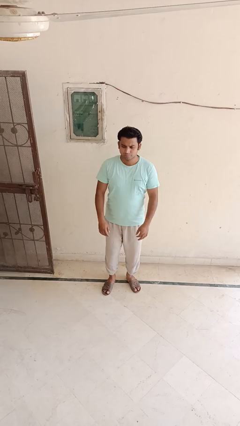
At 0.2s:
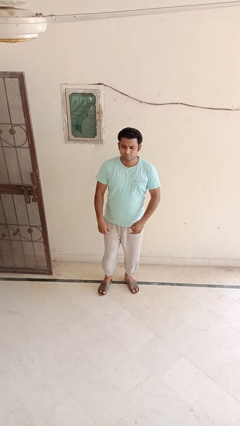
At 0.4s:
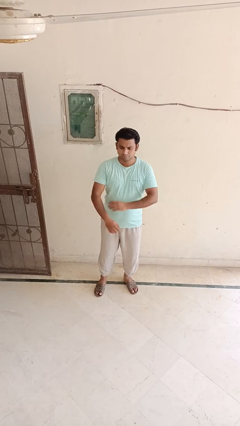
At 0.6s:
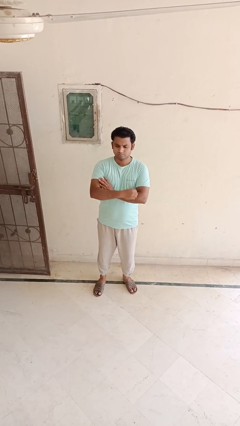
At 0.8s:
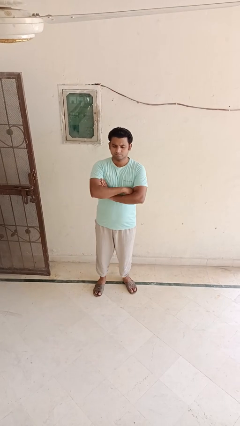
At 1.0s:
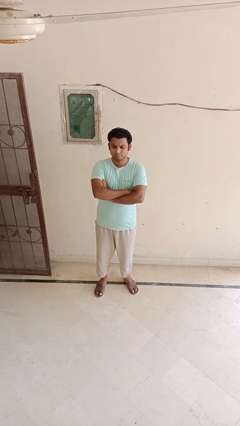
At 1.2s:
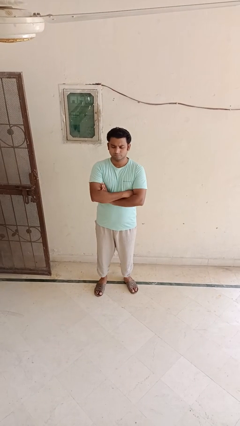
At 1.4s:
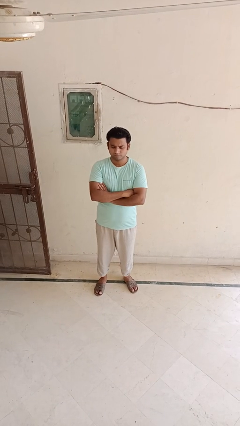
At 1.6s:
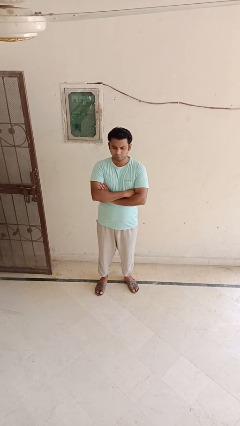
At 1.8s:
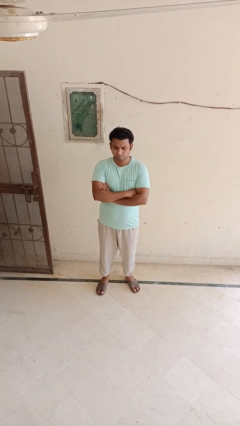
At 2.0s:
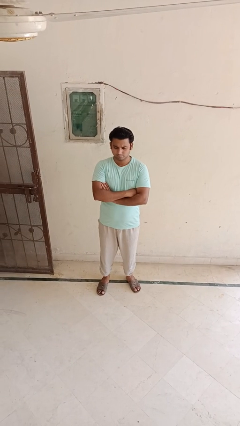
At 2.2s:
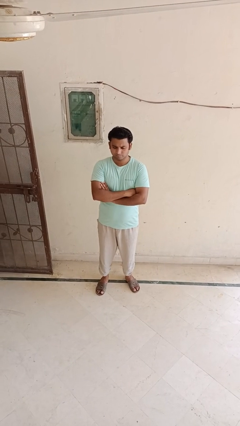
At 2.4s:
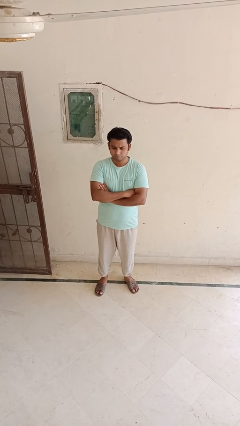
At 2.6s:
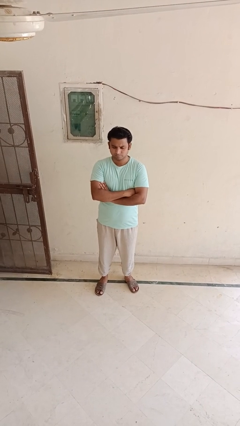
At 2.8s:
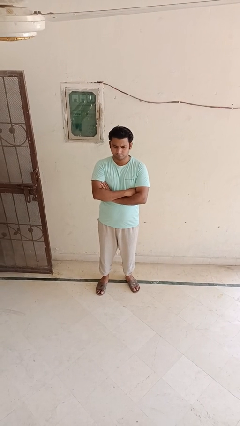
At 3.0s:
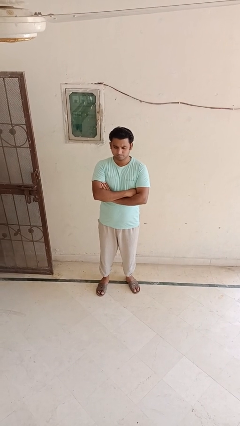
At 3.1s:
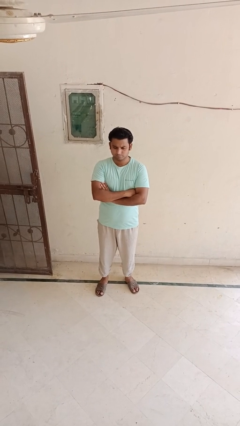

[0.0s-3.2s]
person crosses arms

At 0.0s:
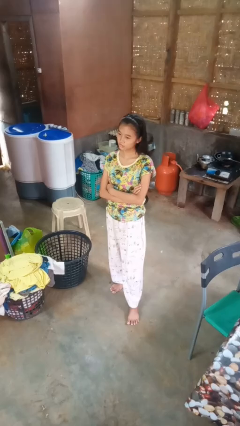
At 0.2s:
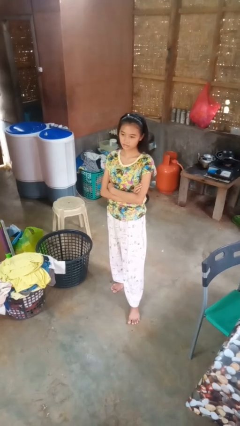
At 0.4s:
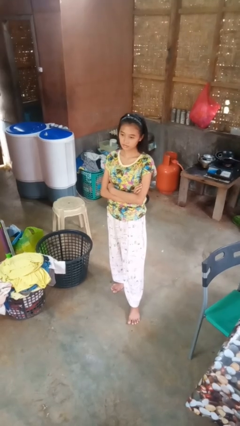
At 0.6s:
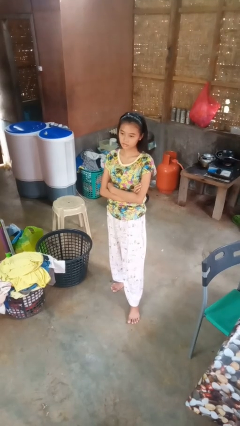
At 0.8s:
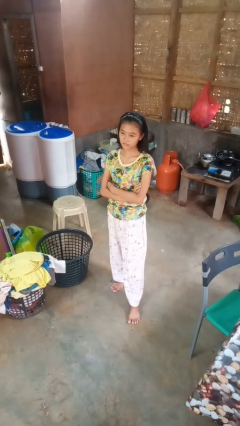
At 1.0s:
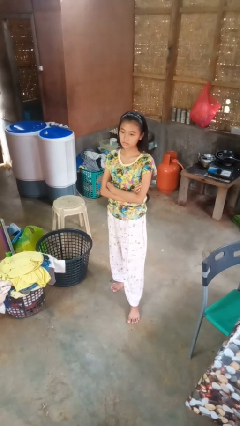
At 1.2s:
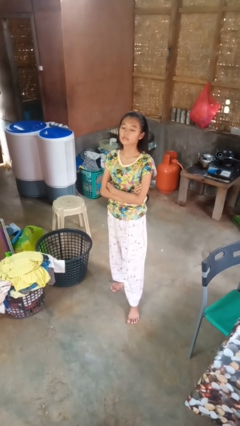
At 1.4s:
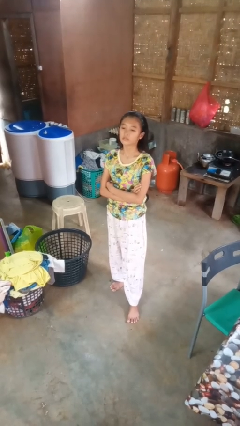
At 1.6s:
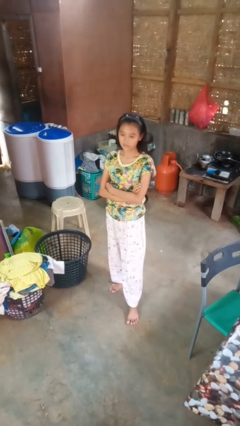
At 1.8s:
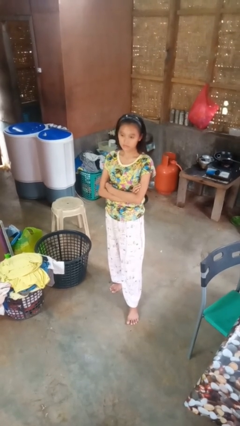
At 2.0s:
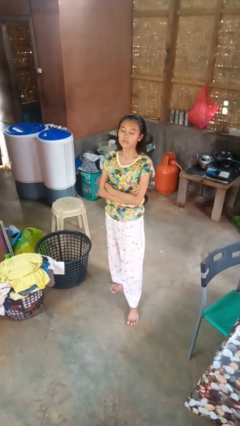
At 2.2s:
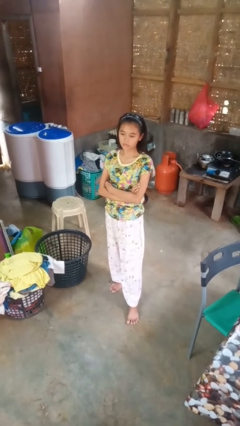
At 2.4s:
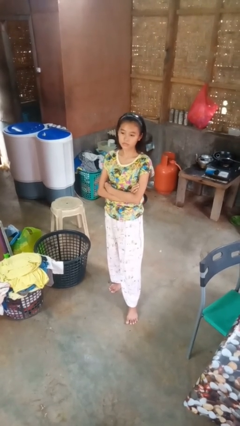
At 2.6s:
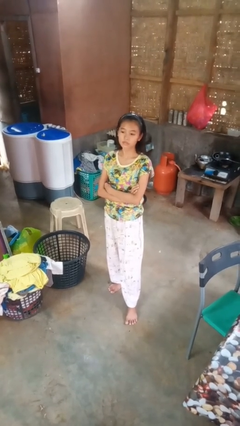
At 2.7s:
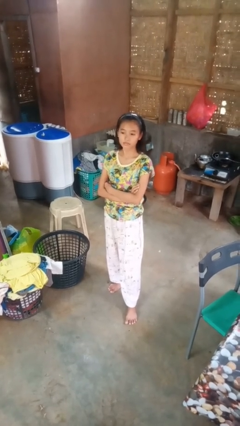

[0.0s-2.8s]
person nods head

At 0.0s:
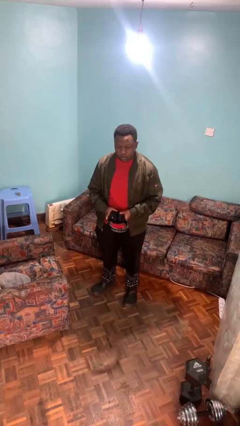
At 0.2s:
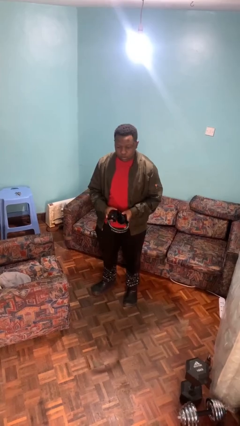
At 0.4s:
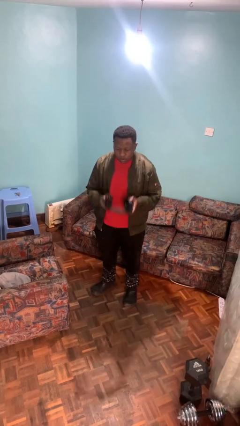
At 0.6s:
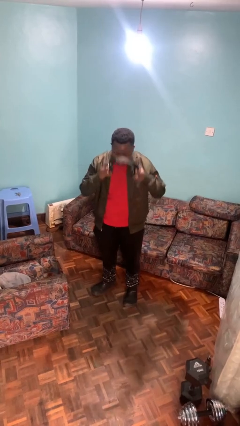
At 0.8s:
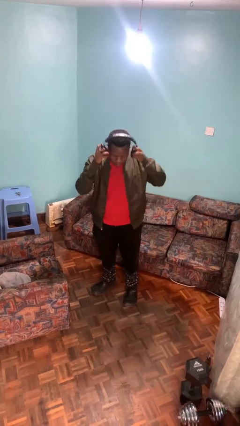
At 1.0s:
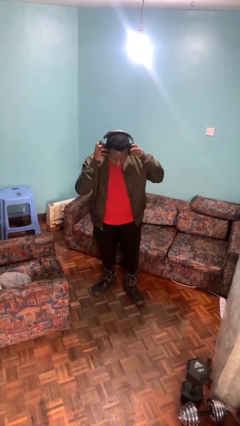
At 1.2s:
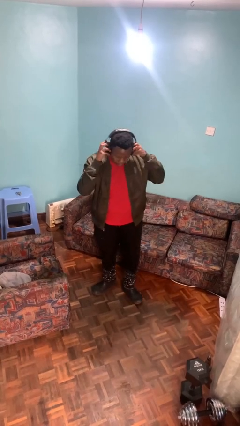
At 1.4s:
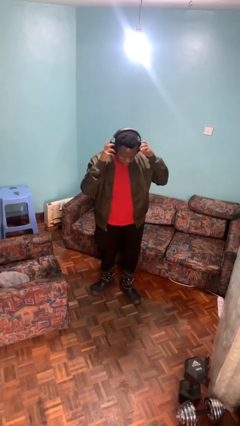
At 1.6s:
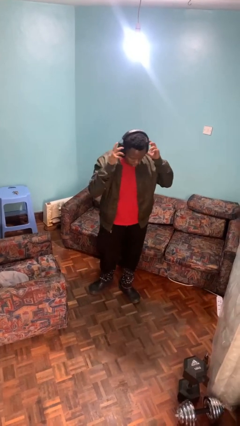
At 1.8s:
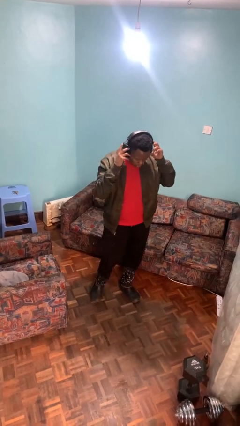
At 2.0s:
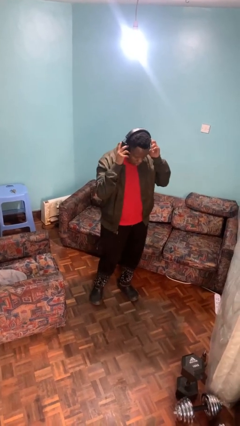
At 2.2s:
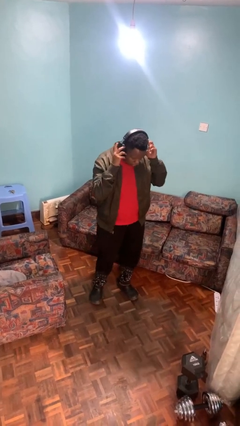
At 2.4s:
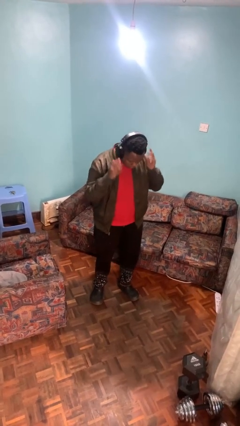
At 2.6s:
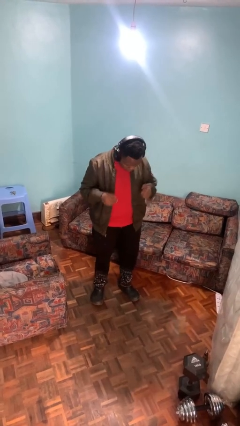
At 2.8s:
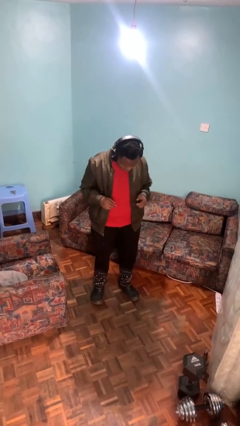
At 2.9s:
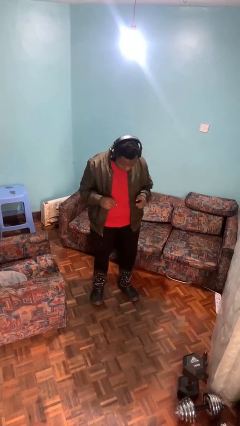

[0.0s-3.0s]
person puts on headphones

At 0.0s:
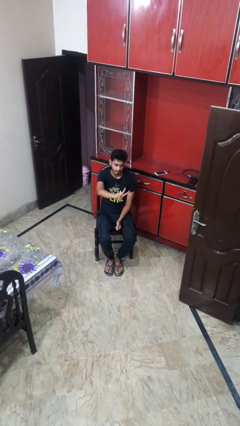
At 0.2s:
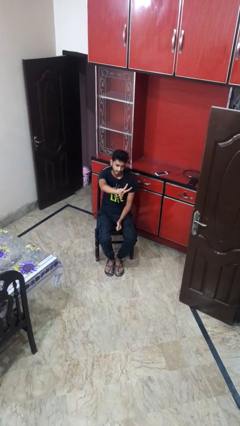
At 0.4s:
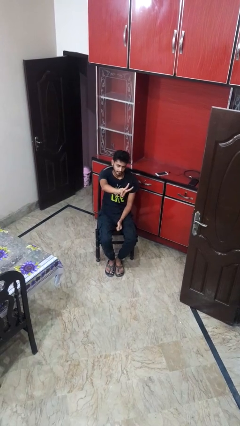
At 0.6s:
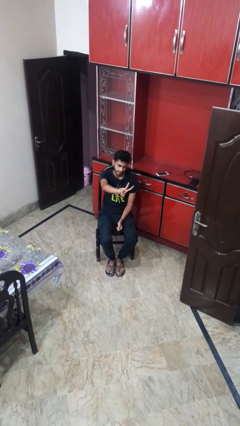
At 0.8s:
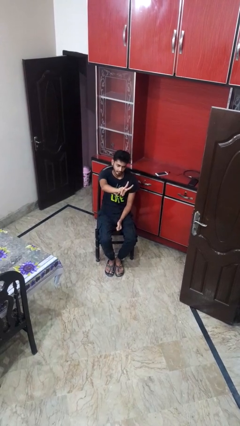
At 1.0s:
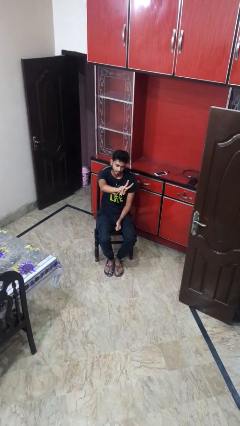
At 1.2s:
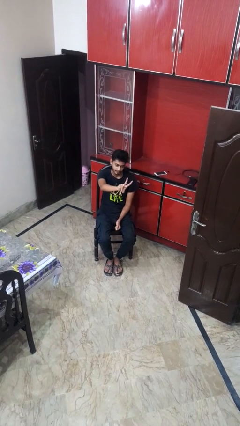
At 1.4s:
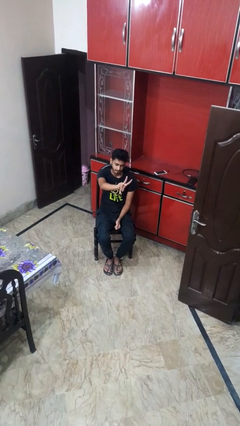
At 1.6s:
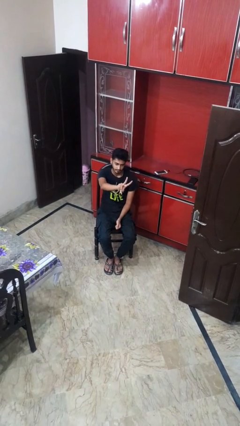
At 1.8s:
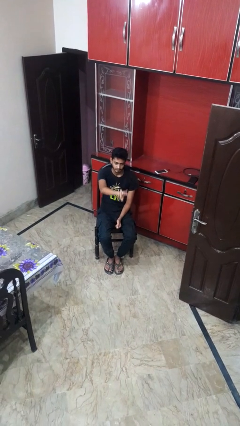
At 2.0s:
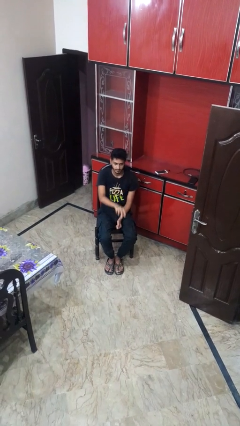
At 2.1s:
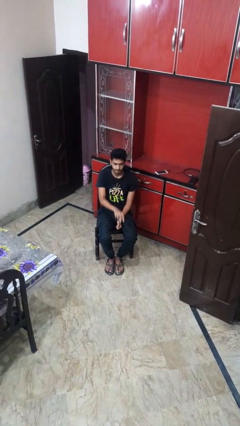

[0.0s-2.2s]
person gestures peace

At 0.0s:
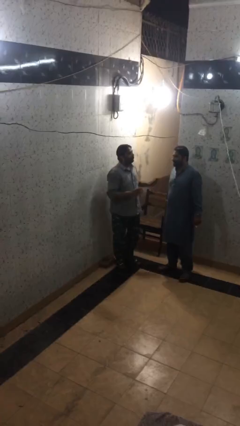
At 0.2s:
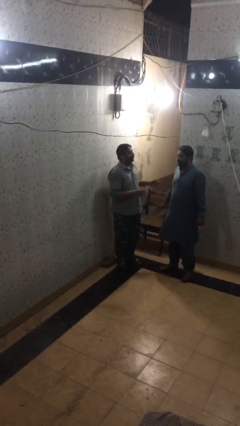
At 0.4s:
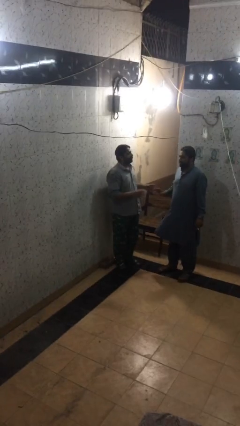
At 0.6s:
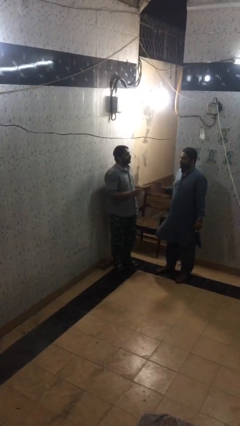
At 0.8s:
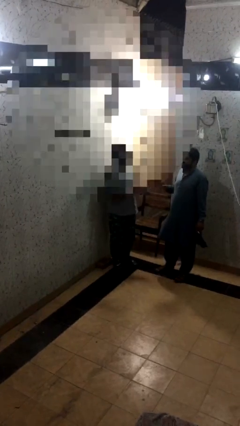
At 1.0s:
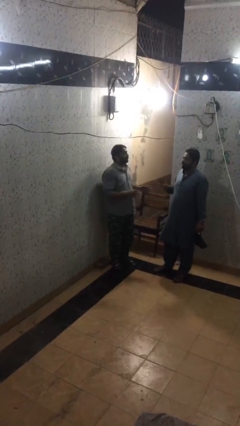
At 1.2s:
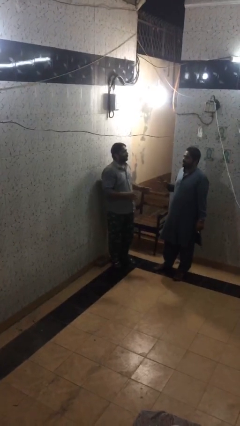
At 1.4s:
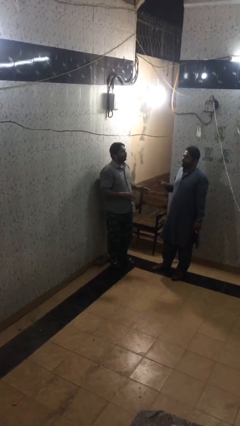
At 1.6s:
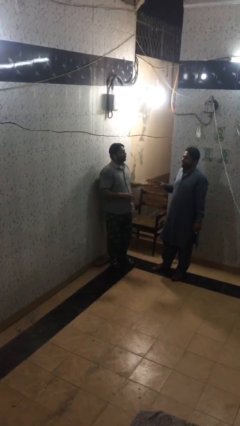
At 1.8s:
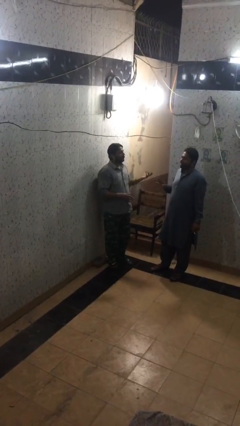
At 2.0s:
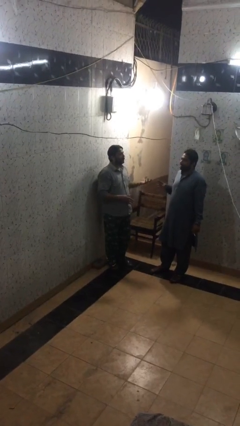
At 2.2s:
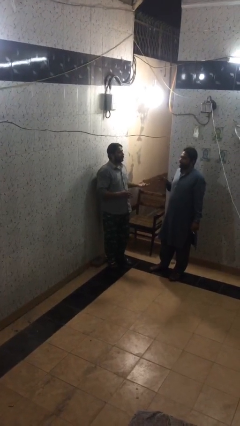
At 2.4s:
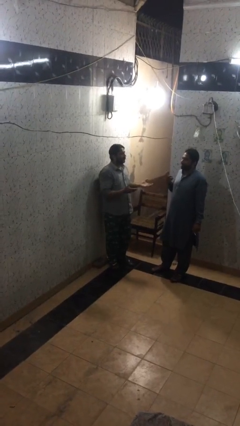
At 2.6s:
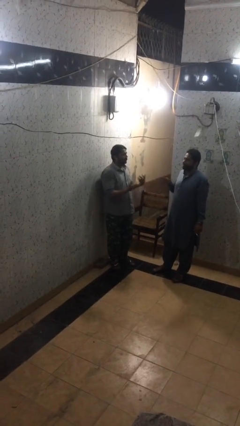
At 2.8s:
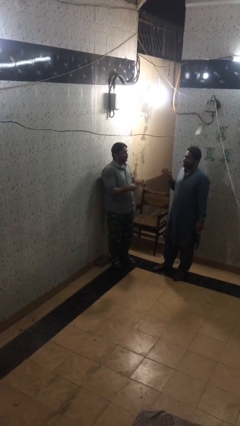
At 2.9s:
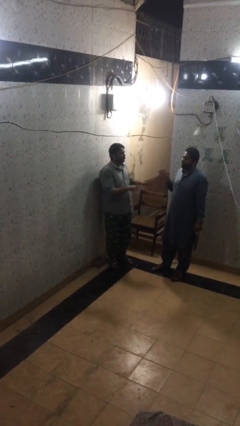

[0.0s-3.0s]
person talks to person

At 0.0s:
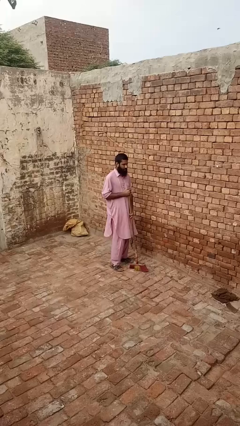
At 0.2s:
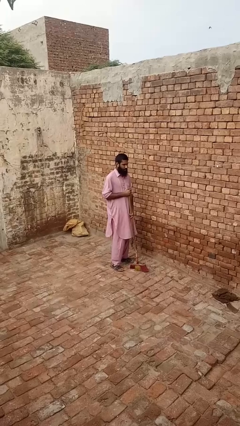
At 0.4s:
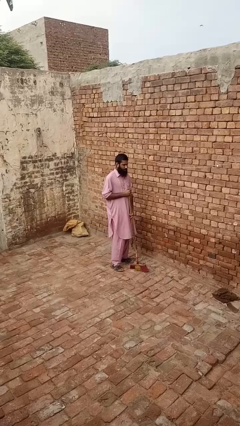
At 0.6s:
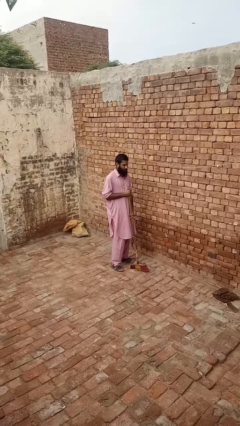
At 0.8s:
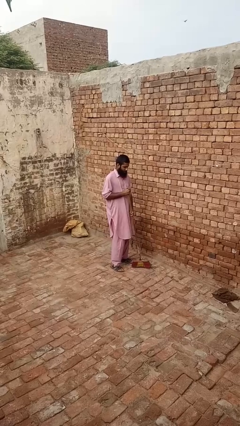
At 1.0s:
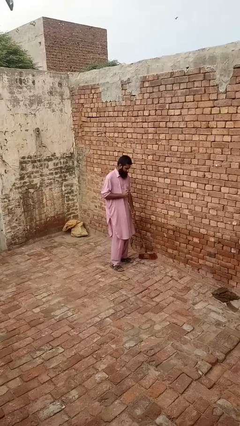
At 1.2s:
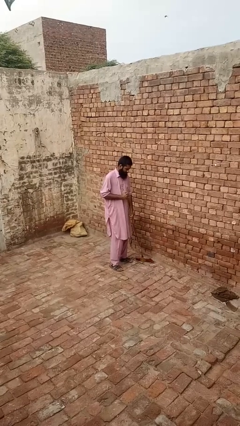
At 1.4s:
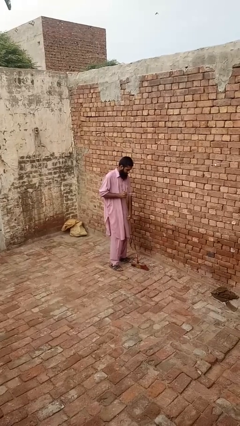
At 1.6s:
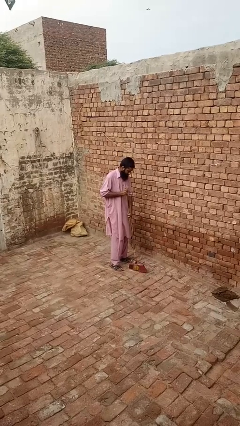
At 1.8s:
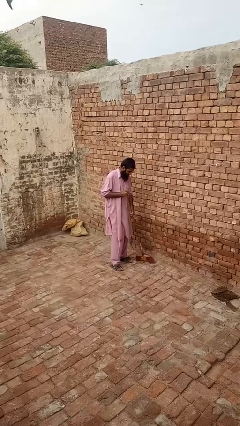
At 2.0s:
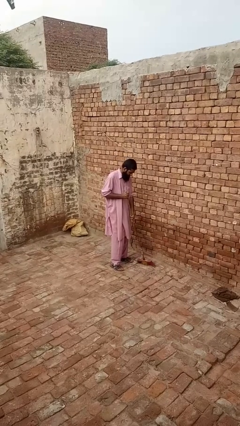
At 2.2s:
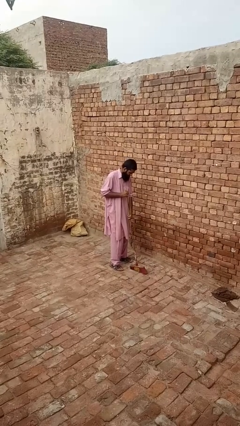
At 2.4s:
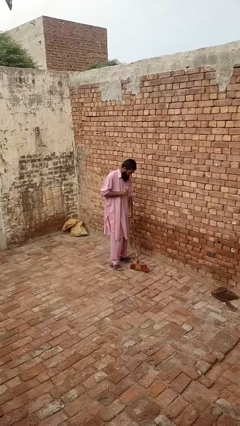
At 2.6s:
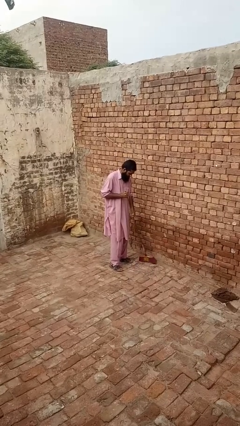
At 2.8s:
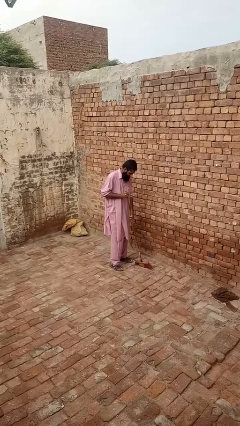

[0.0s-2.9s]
person sweeps floor

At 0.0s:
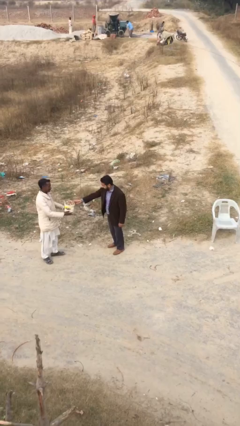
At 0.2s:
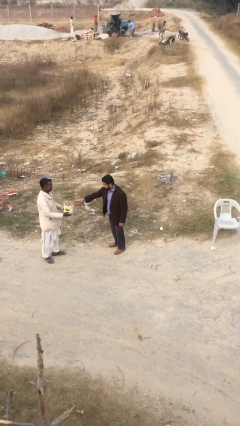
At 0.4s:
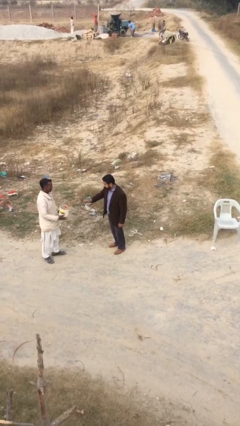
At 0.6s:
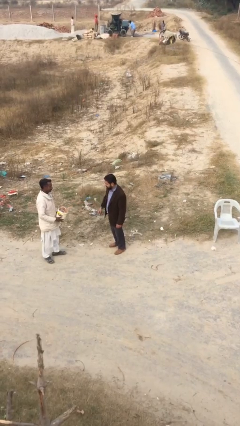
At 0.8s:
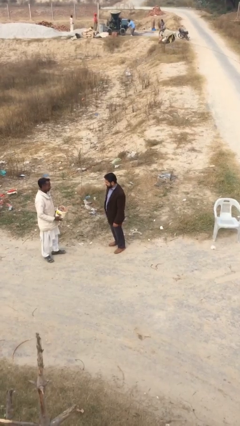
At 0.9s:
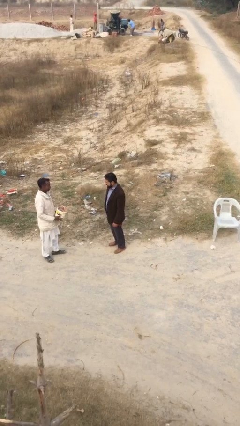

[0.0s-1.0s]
person transfers object to person
